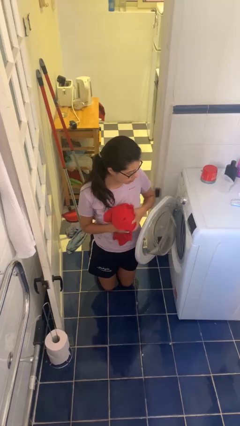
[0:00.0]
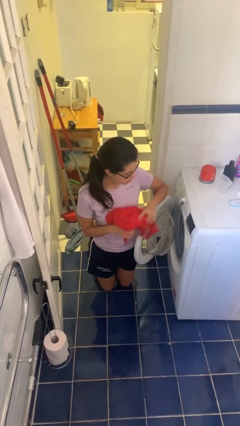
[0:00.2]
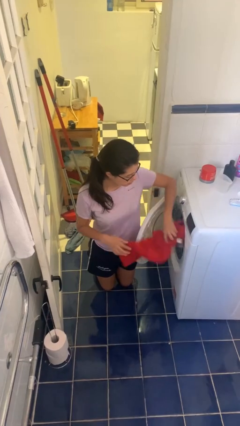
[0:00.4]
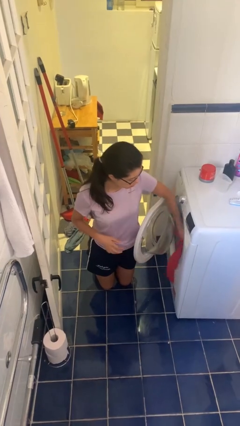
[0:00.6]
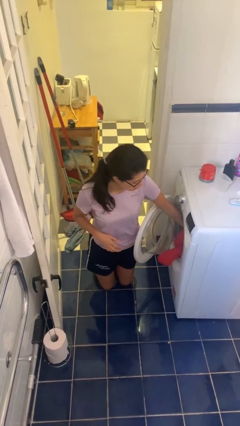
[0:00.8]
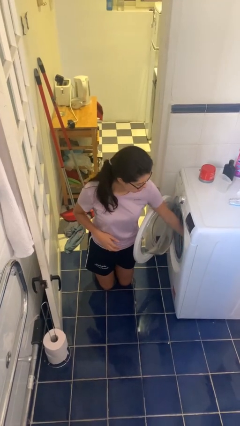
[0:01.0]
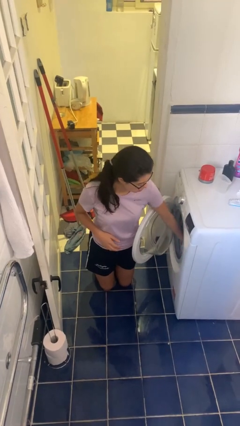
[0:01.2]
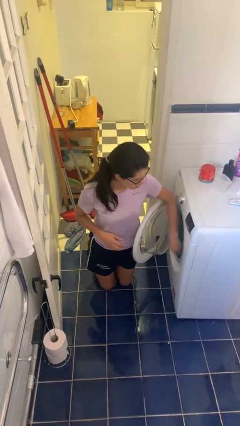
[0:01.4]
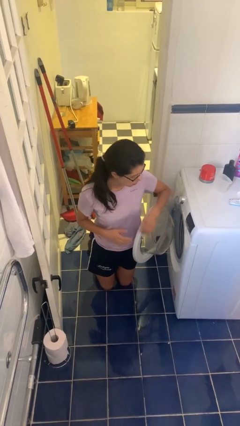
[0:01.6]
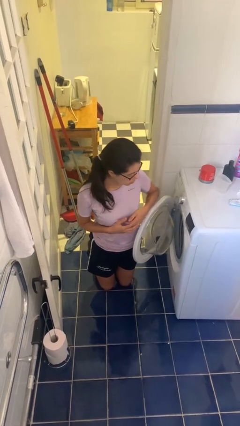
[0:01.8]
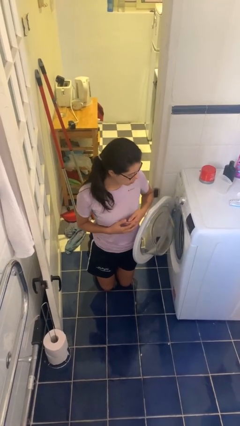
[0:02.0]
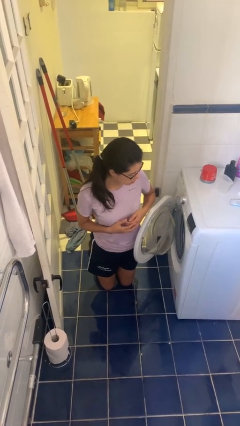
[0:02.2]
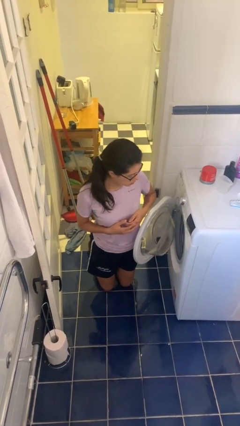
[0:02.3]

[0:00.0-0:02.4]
person loads dryer

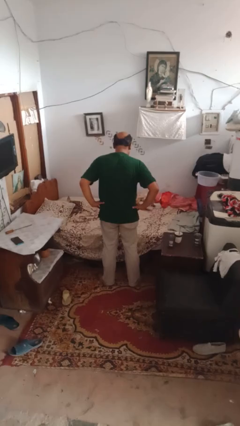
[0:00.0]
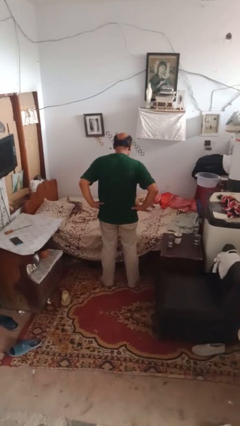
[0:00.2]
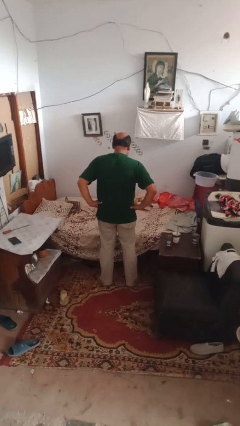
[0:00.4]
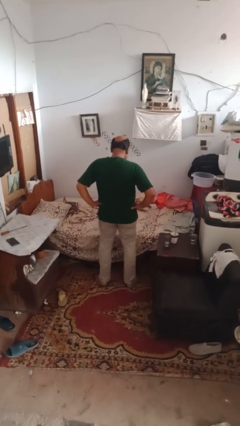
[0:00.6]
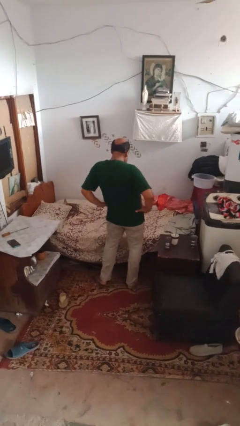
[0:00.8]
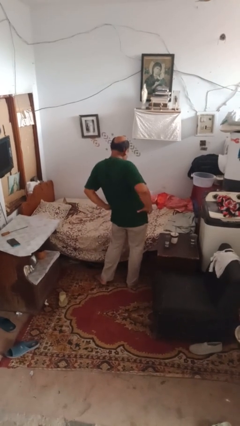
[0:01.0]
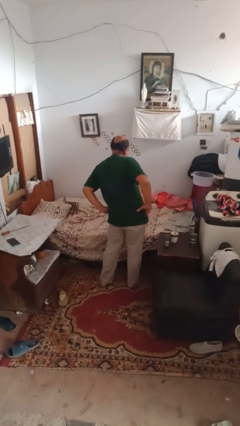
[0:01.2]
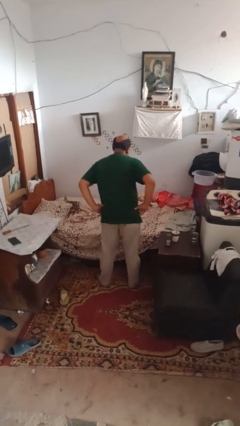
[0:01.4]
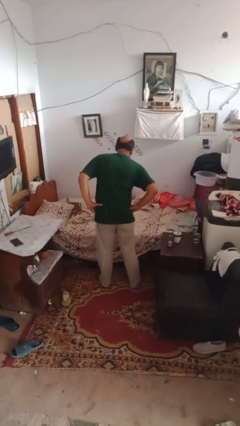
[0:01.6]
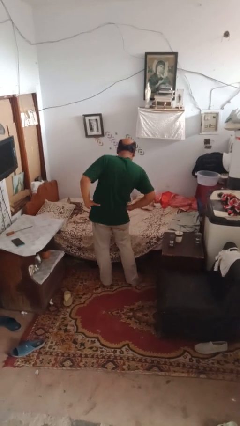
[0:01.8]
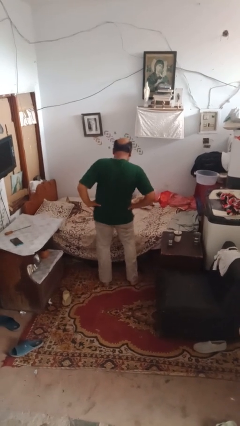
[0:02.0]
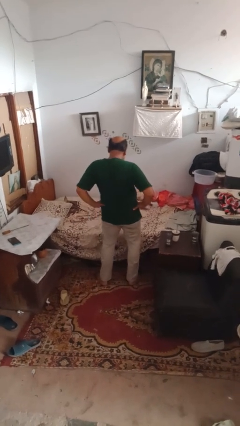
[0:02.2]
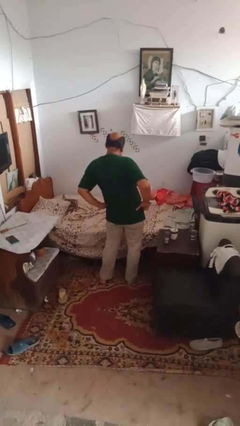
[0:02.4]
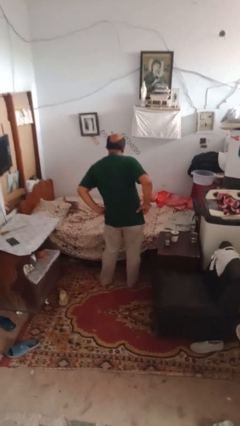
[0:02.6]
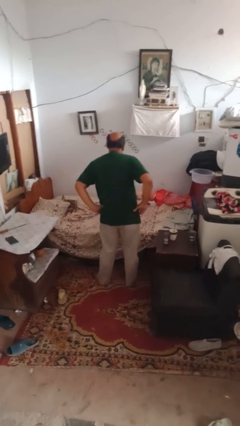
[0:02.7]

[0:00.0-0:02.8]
person wiggles hips

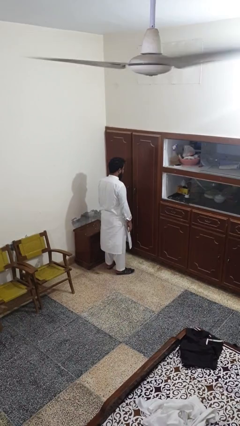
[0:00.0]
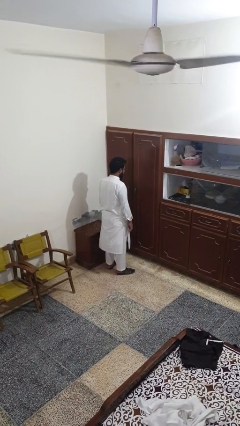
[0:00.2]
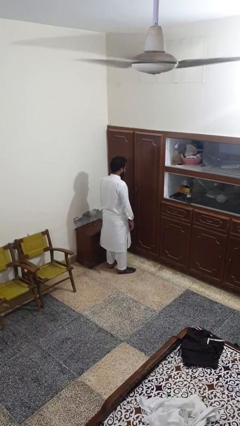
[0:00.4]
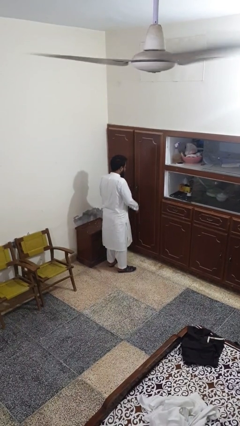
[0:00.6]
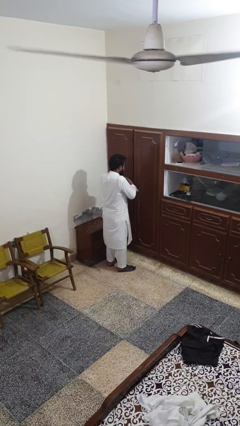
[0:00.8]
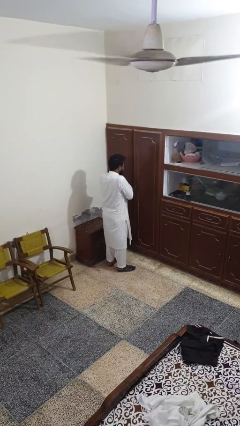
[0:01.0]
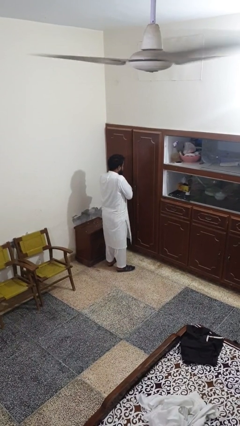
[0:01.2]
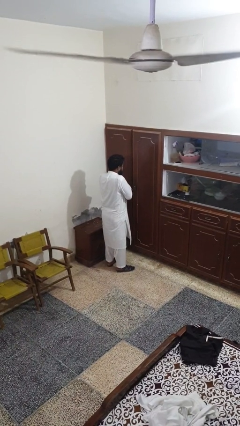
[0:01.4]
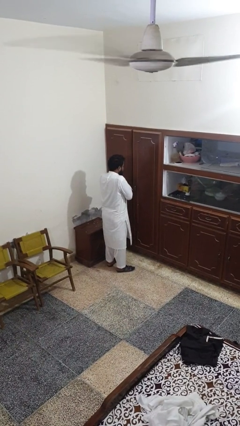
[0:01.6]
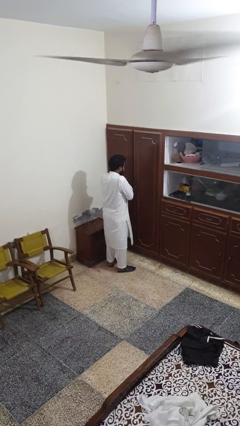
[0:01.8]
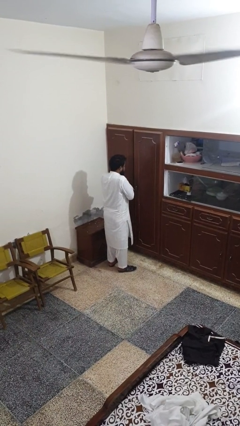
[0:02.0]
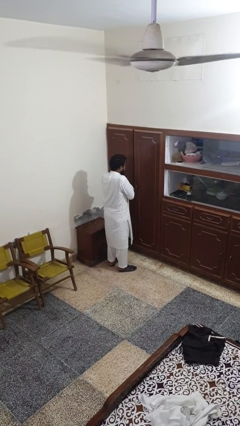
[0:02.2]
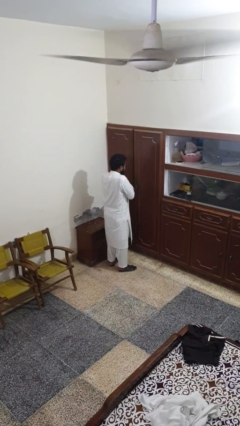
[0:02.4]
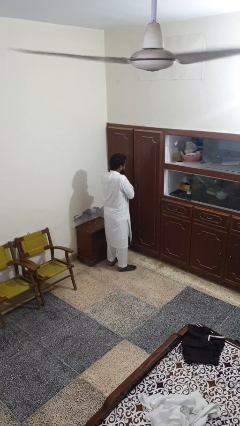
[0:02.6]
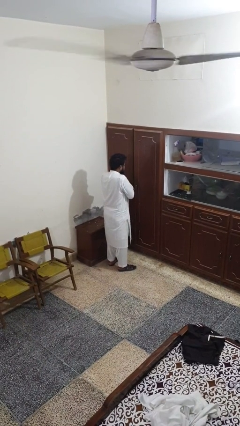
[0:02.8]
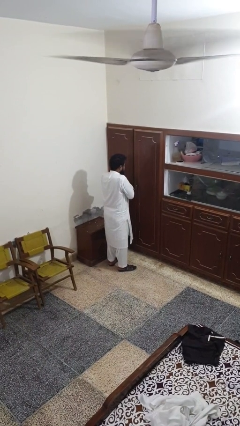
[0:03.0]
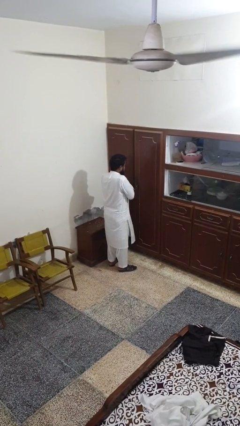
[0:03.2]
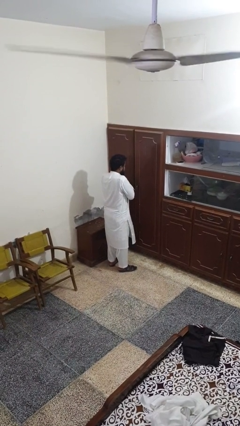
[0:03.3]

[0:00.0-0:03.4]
person prays

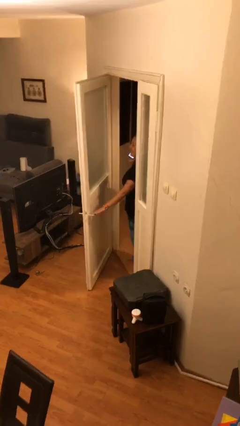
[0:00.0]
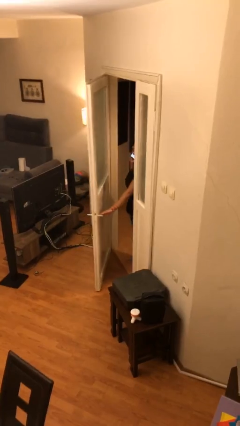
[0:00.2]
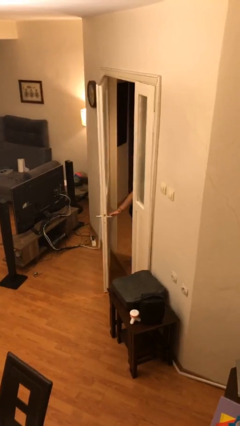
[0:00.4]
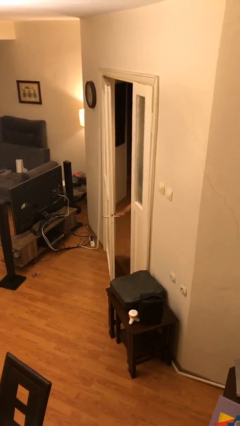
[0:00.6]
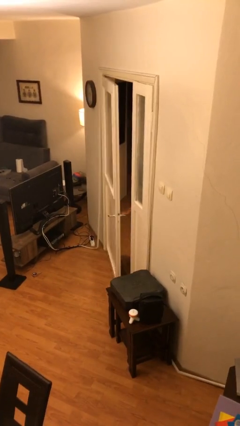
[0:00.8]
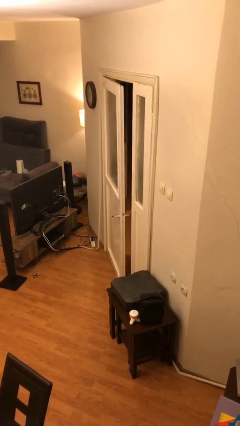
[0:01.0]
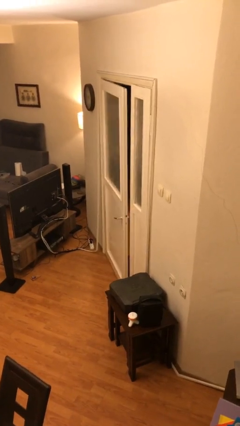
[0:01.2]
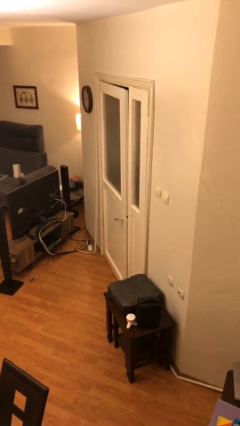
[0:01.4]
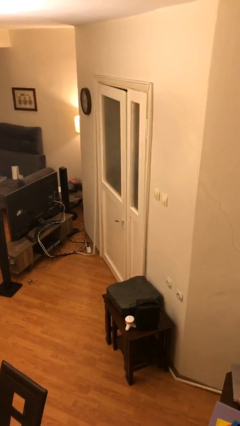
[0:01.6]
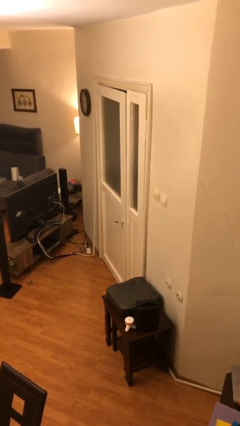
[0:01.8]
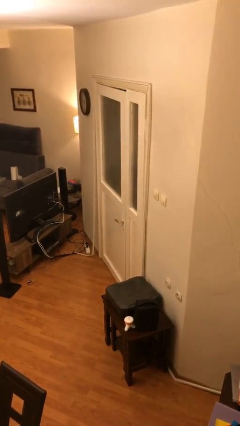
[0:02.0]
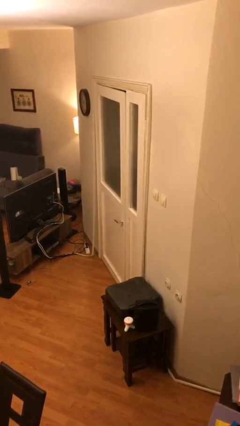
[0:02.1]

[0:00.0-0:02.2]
person closes facility door

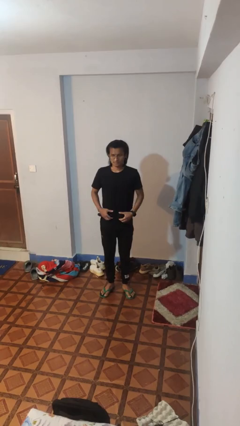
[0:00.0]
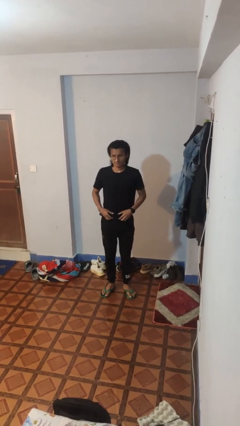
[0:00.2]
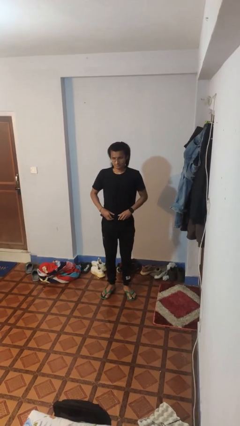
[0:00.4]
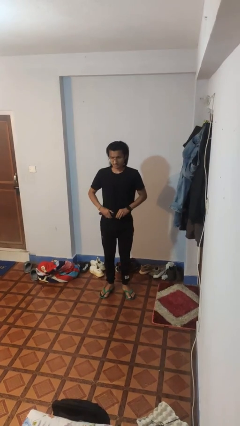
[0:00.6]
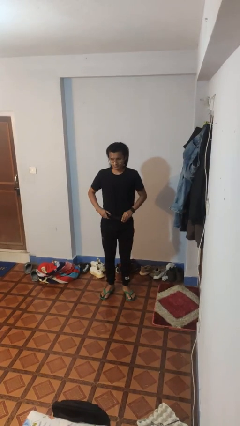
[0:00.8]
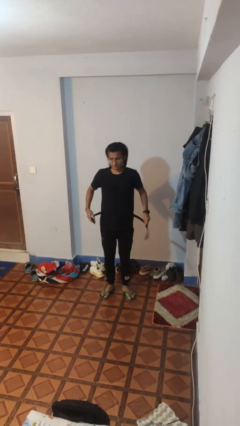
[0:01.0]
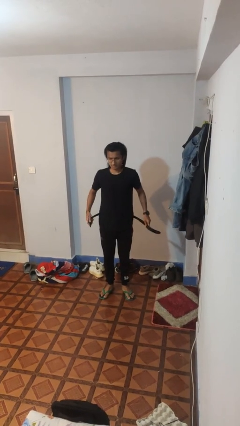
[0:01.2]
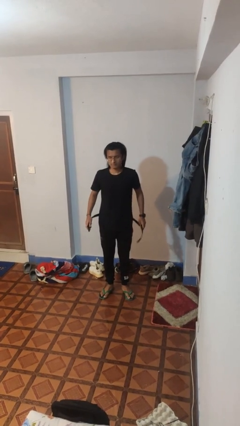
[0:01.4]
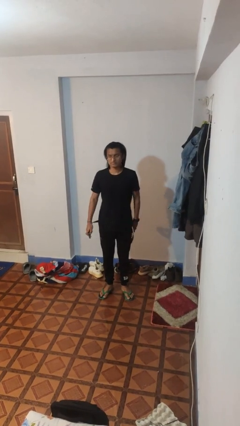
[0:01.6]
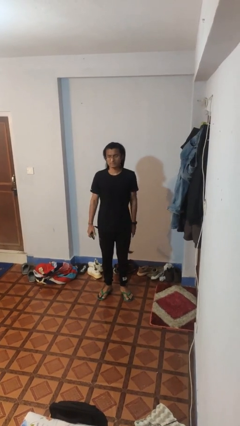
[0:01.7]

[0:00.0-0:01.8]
person takes off belt

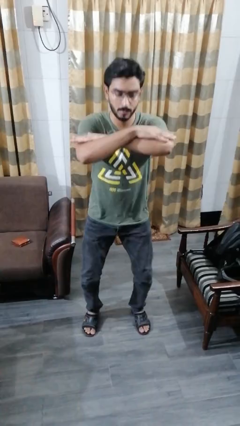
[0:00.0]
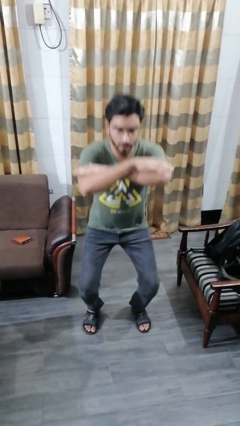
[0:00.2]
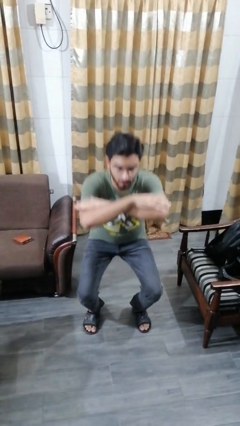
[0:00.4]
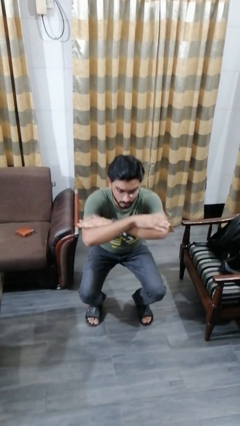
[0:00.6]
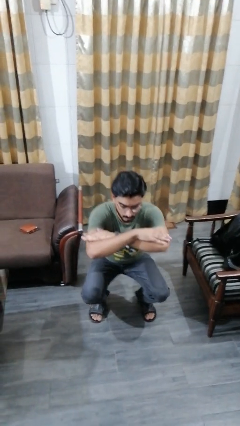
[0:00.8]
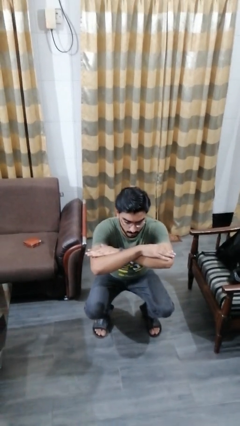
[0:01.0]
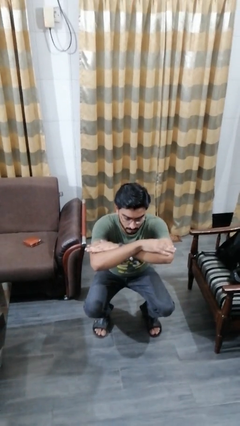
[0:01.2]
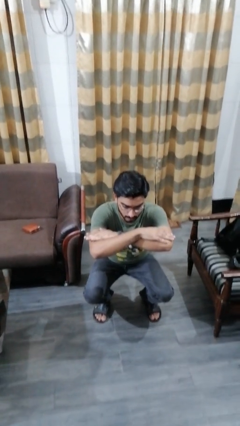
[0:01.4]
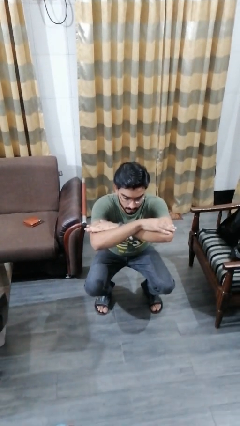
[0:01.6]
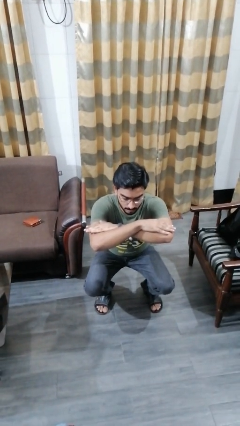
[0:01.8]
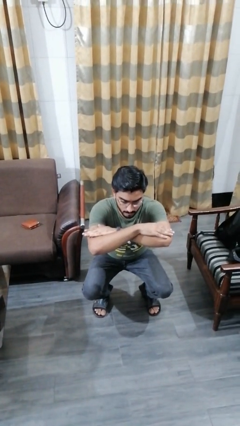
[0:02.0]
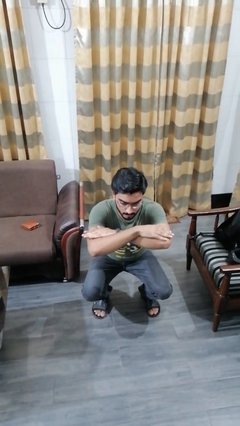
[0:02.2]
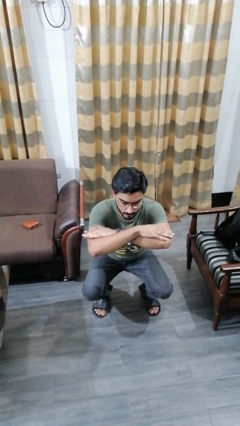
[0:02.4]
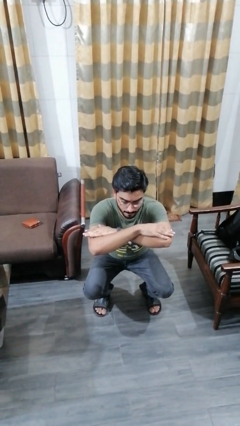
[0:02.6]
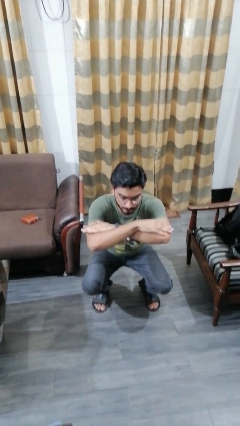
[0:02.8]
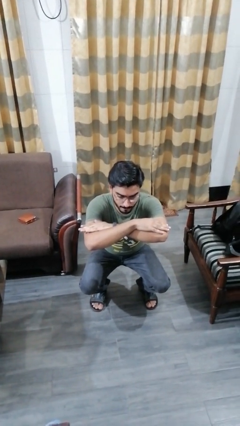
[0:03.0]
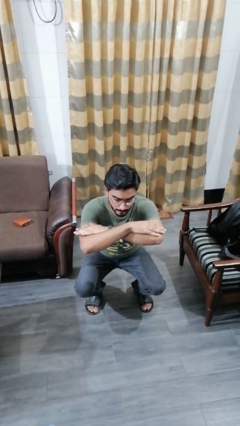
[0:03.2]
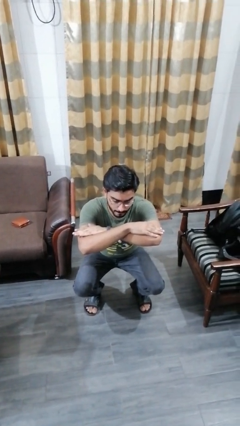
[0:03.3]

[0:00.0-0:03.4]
person squats

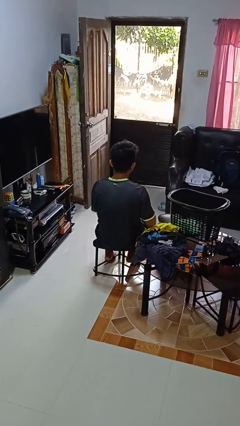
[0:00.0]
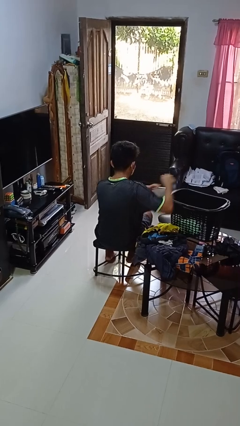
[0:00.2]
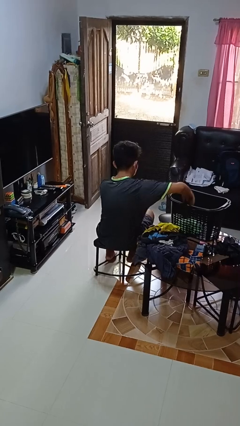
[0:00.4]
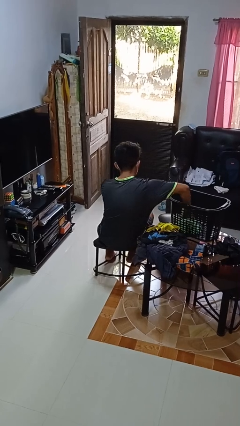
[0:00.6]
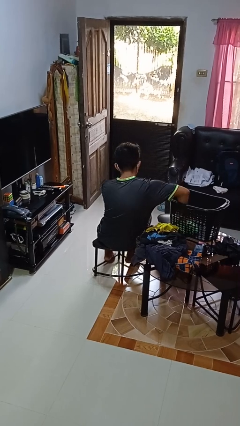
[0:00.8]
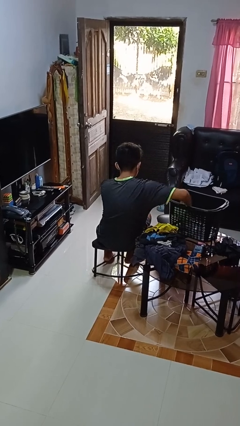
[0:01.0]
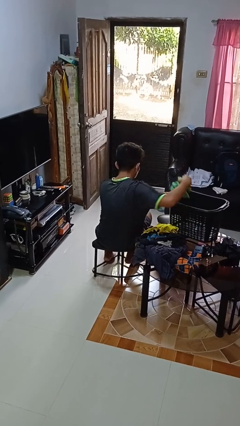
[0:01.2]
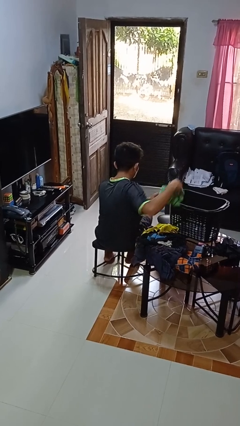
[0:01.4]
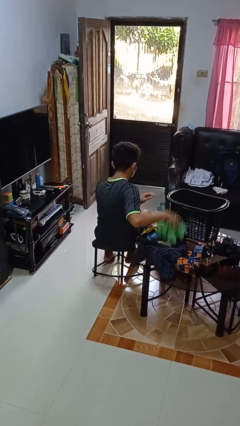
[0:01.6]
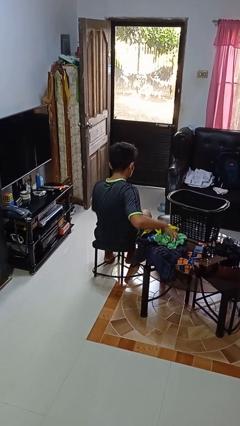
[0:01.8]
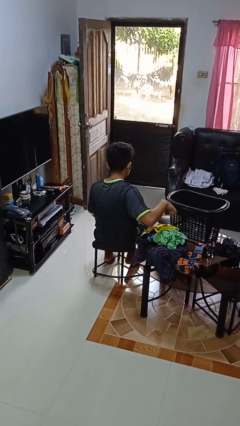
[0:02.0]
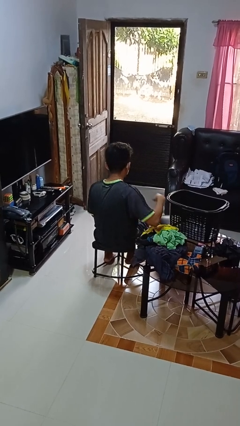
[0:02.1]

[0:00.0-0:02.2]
person takes object from basket
